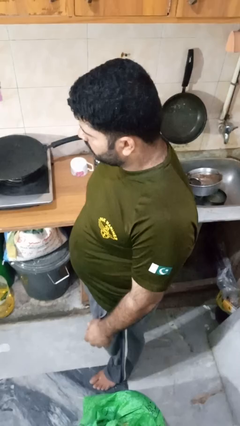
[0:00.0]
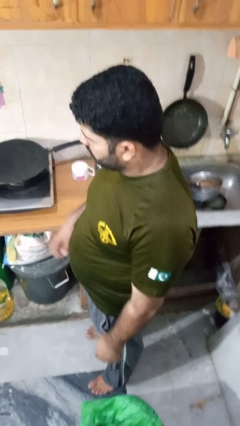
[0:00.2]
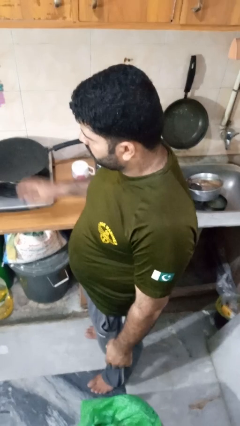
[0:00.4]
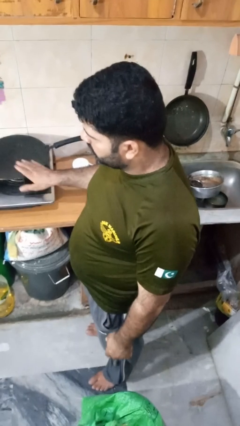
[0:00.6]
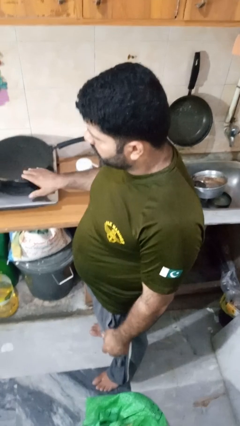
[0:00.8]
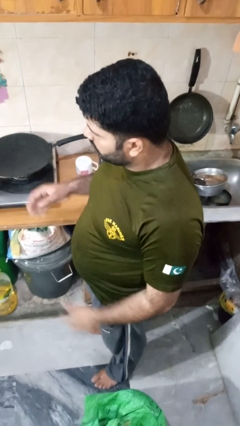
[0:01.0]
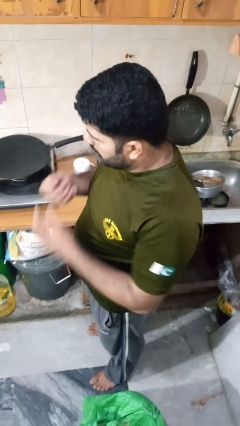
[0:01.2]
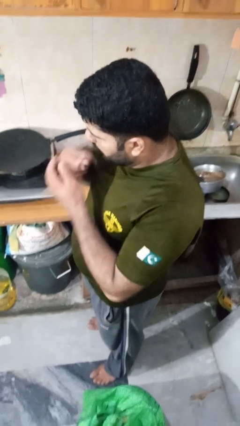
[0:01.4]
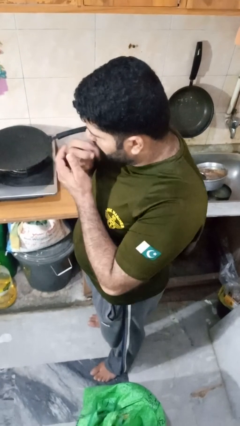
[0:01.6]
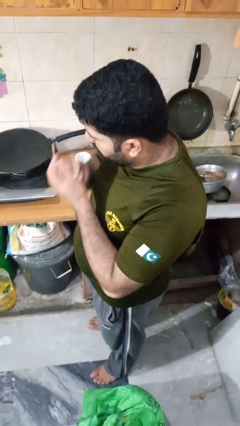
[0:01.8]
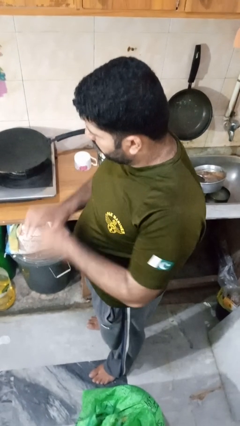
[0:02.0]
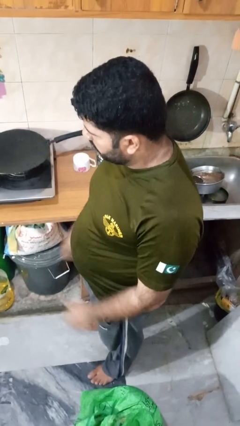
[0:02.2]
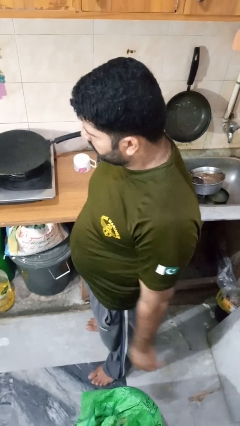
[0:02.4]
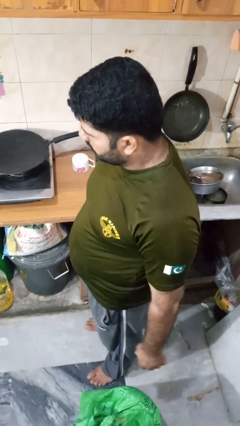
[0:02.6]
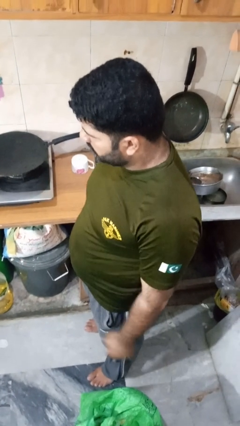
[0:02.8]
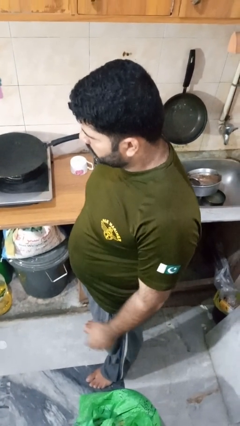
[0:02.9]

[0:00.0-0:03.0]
person burns hand

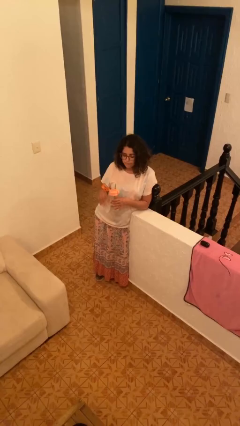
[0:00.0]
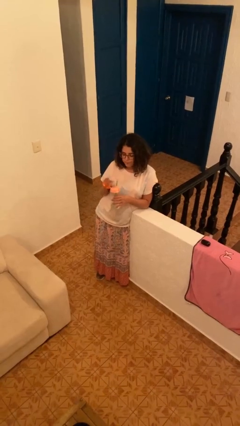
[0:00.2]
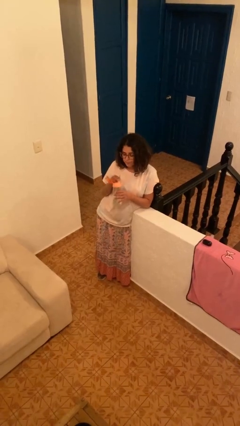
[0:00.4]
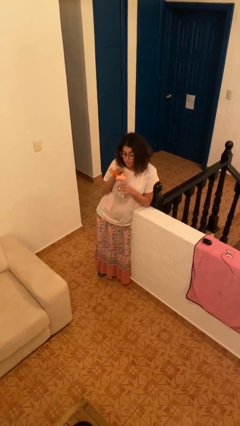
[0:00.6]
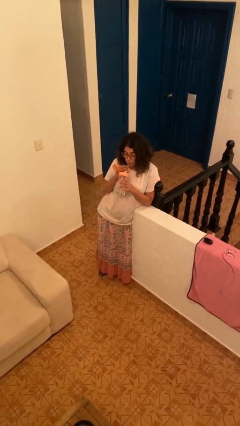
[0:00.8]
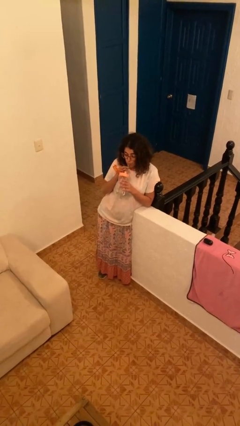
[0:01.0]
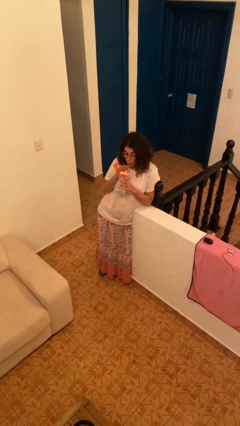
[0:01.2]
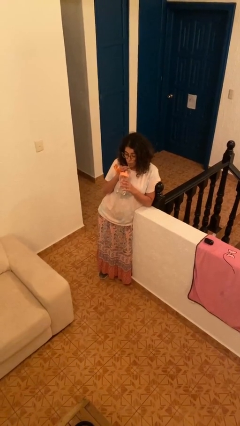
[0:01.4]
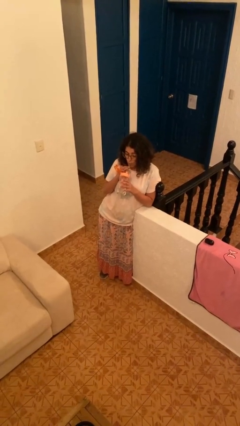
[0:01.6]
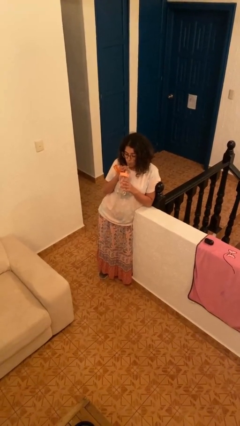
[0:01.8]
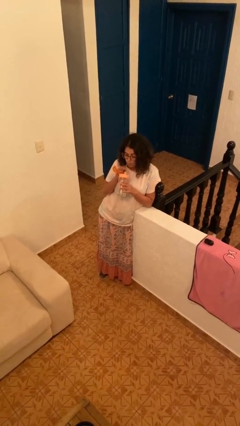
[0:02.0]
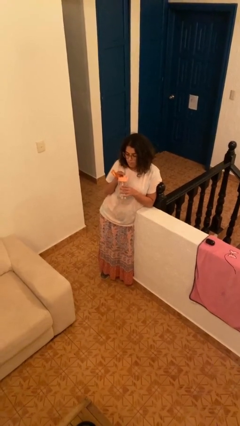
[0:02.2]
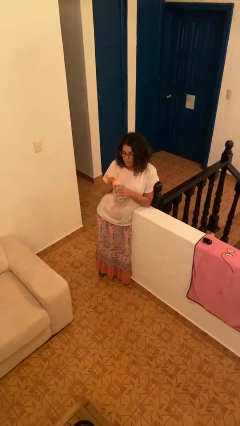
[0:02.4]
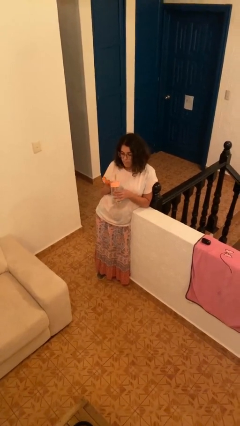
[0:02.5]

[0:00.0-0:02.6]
person drinks from straw

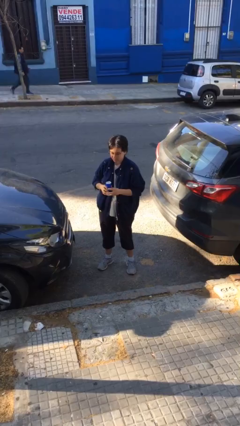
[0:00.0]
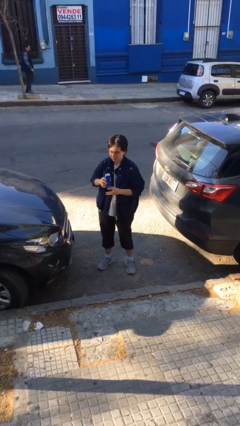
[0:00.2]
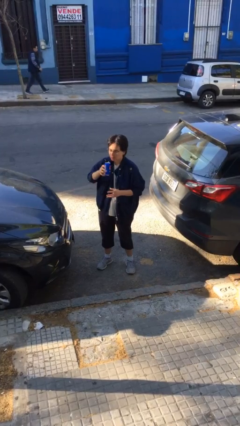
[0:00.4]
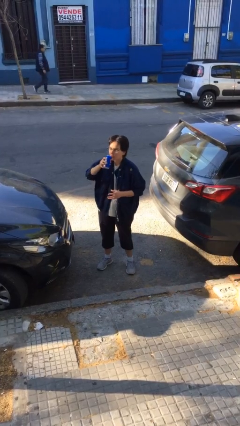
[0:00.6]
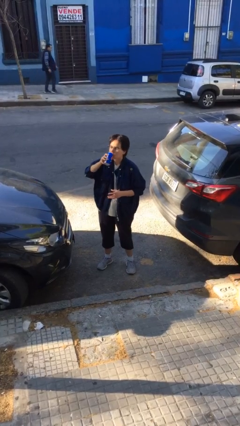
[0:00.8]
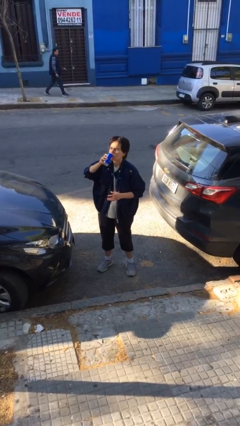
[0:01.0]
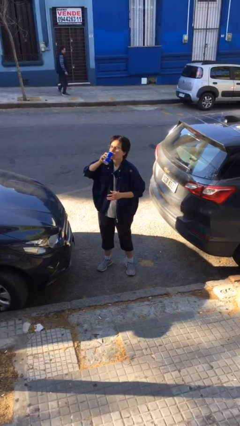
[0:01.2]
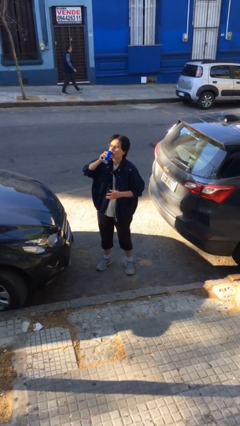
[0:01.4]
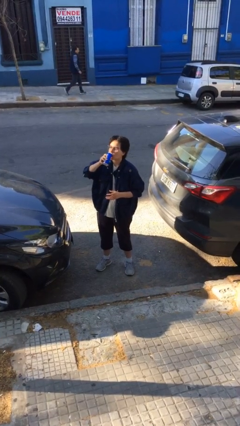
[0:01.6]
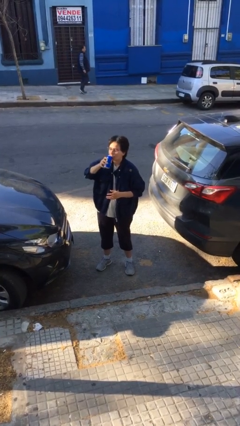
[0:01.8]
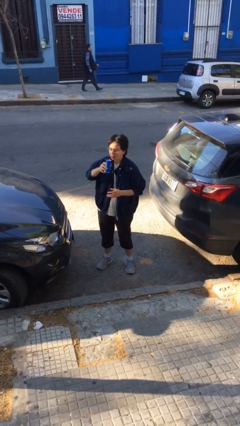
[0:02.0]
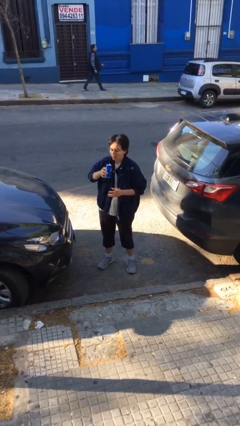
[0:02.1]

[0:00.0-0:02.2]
person drinks from beverage can

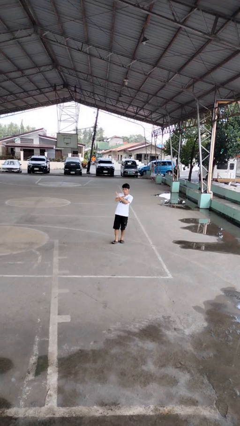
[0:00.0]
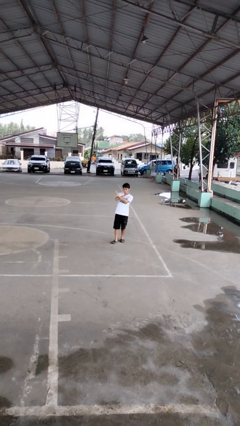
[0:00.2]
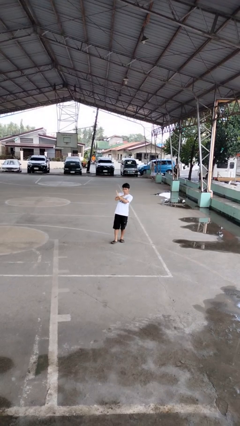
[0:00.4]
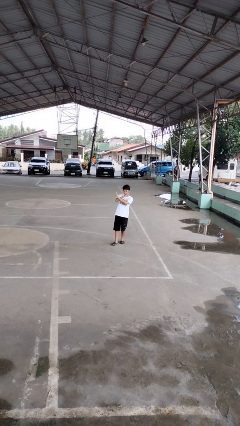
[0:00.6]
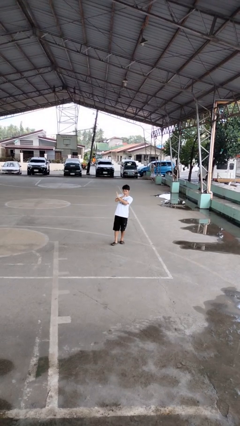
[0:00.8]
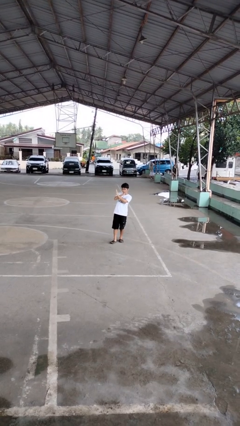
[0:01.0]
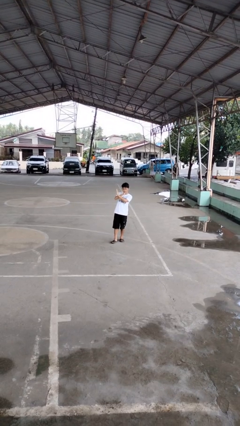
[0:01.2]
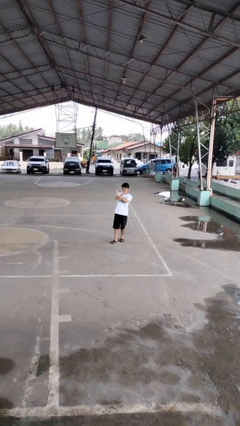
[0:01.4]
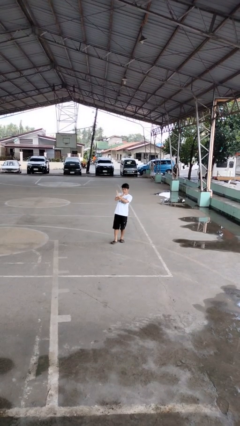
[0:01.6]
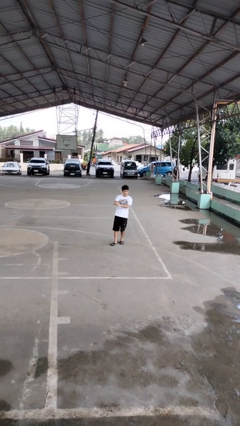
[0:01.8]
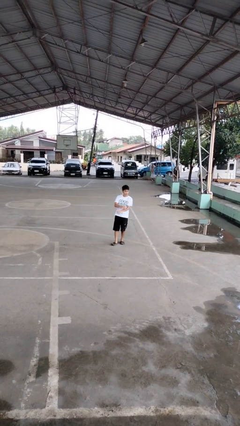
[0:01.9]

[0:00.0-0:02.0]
person gestures arms x

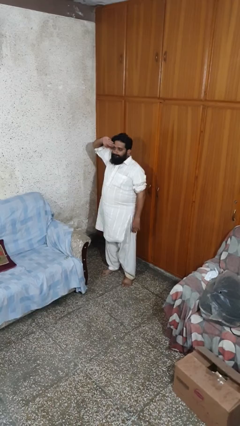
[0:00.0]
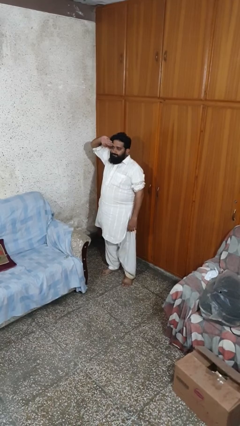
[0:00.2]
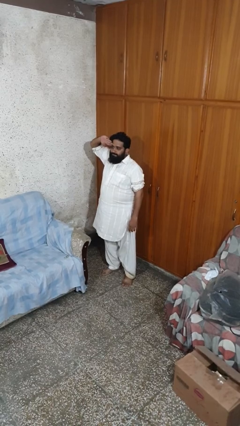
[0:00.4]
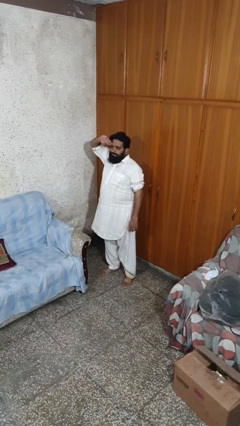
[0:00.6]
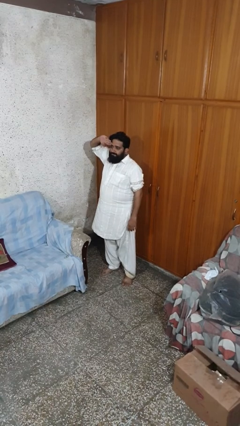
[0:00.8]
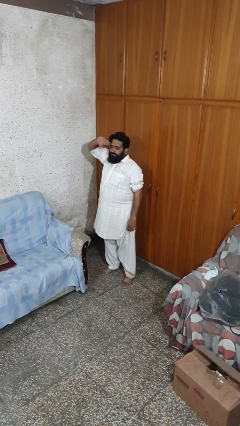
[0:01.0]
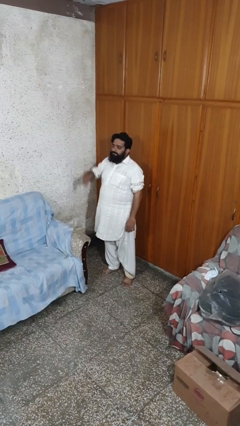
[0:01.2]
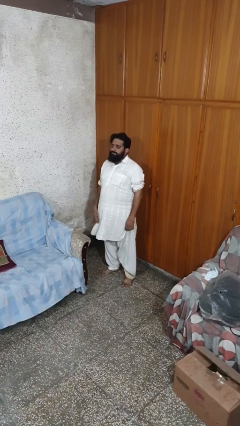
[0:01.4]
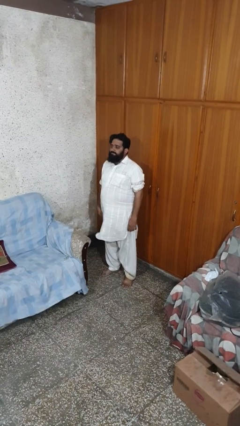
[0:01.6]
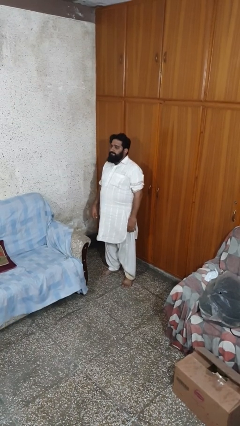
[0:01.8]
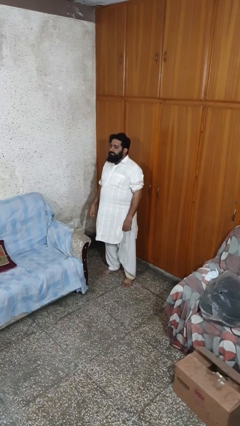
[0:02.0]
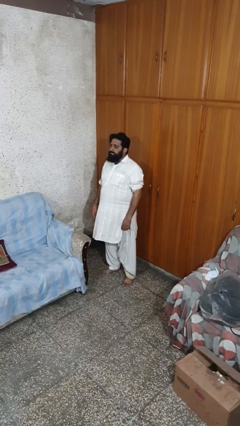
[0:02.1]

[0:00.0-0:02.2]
person salutes

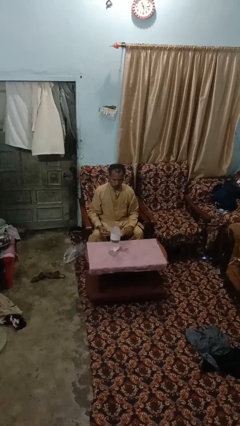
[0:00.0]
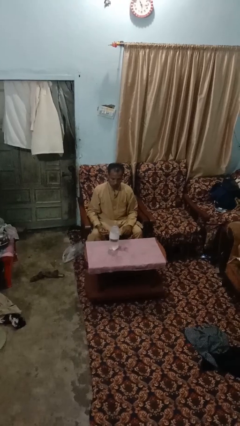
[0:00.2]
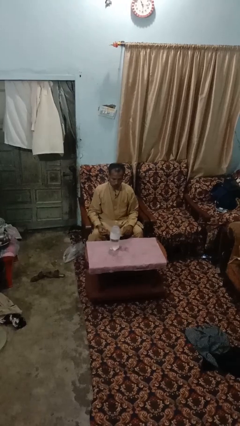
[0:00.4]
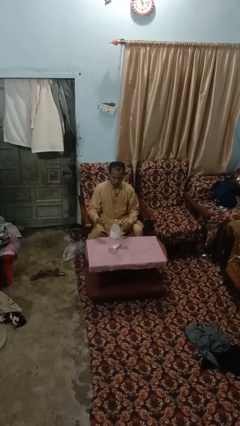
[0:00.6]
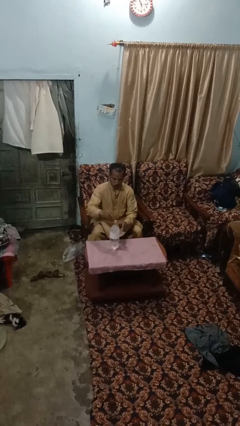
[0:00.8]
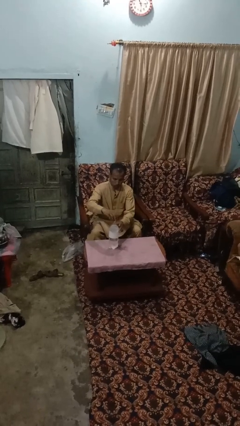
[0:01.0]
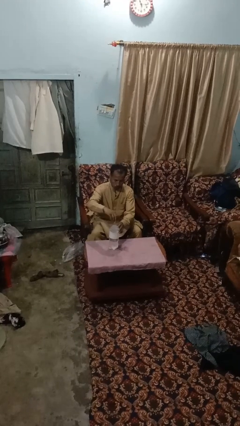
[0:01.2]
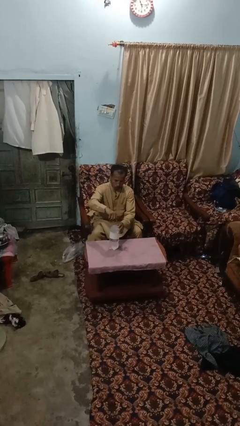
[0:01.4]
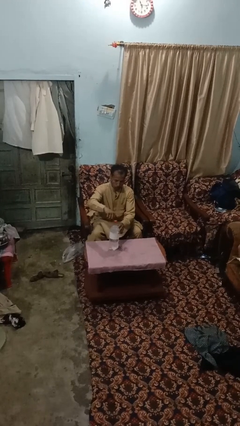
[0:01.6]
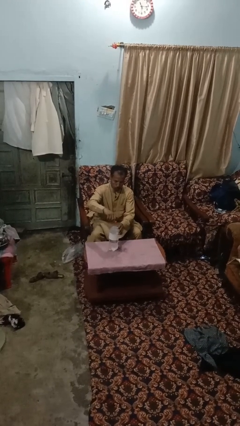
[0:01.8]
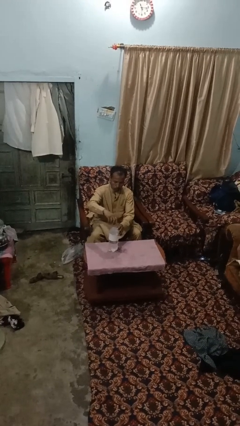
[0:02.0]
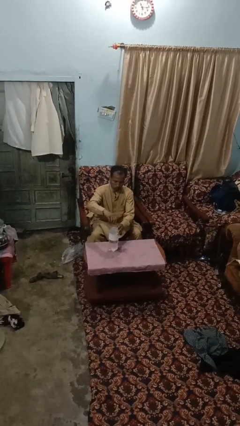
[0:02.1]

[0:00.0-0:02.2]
person screws lid to bottle

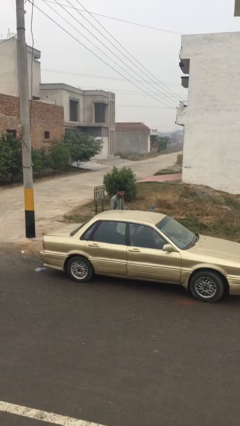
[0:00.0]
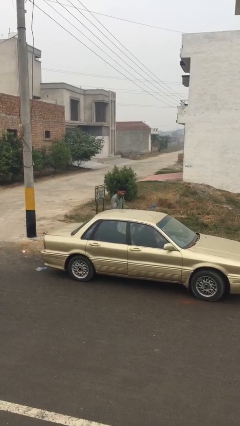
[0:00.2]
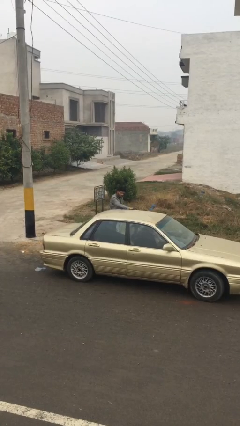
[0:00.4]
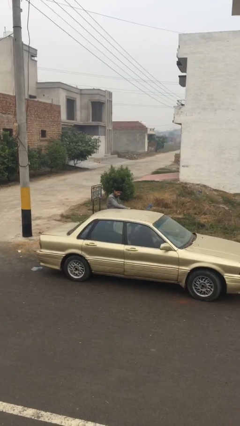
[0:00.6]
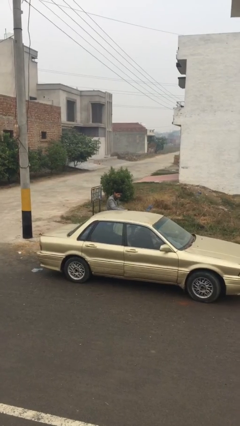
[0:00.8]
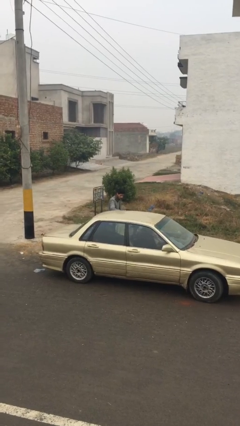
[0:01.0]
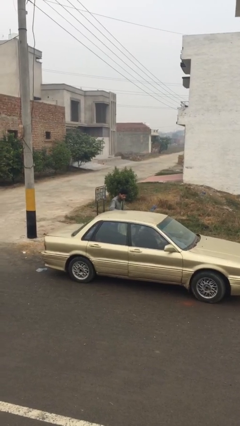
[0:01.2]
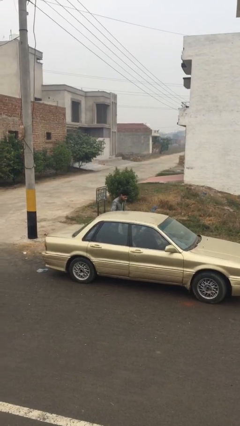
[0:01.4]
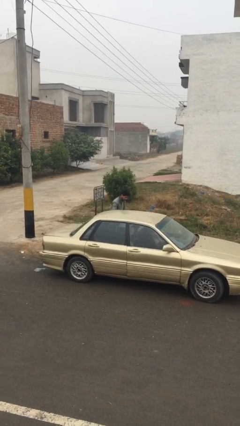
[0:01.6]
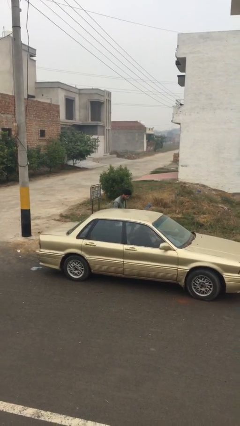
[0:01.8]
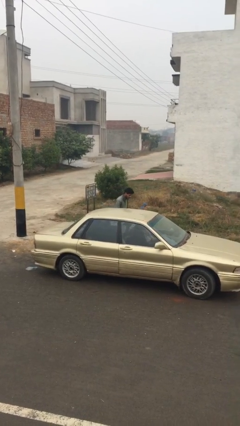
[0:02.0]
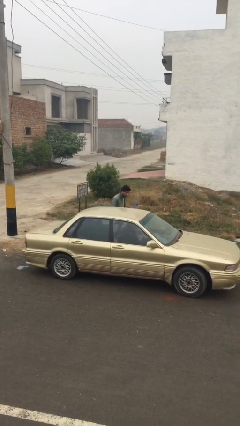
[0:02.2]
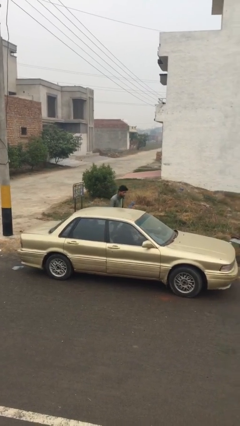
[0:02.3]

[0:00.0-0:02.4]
person closes car door

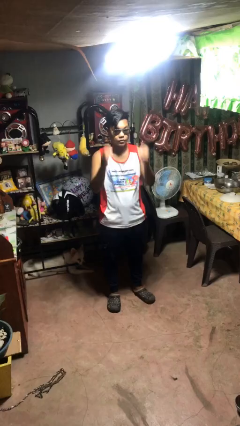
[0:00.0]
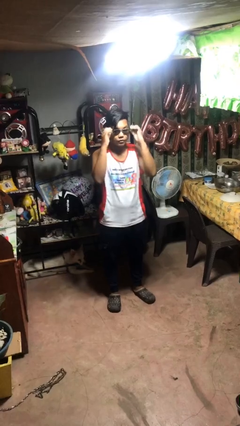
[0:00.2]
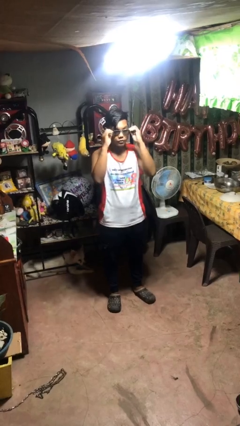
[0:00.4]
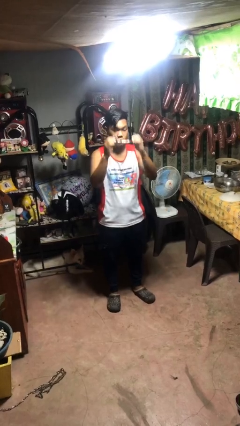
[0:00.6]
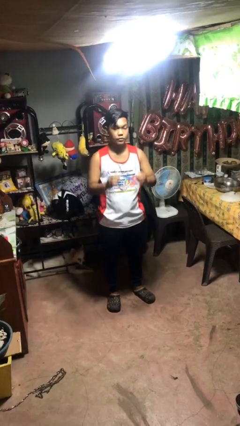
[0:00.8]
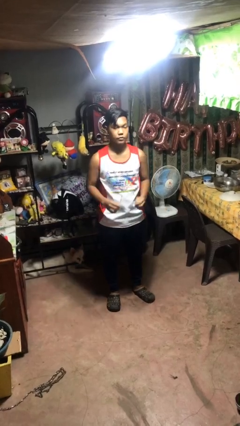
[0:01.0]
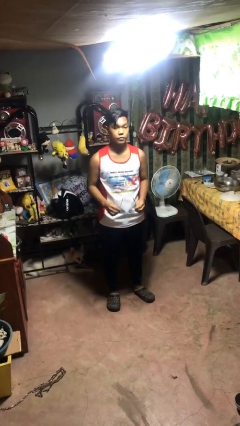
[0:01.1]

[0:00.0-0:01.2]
person takes off sunglasses
